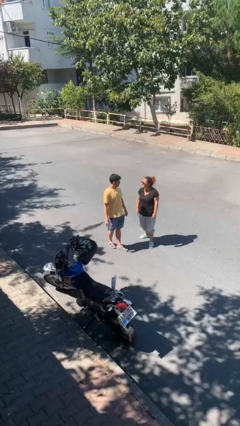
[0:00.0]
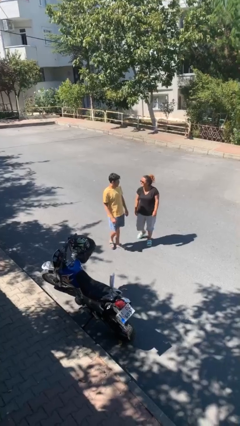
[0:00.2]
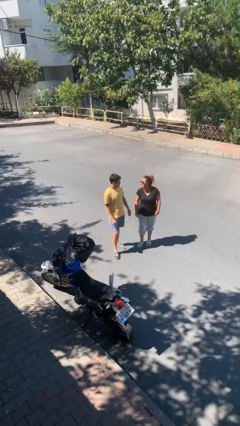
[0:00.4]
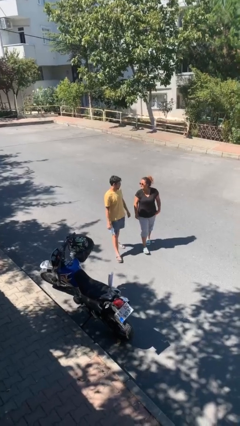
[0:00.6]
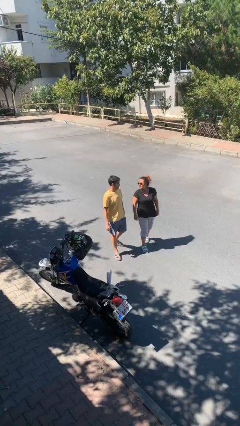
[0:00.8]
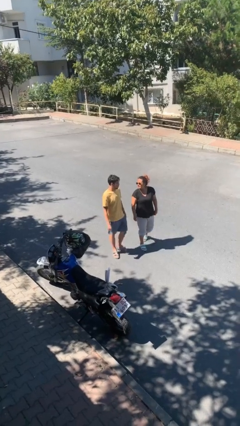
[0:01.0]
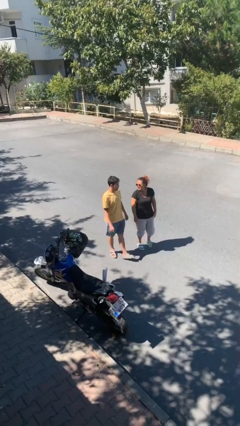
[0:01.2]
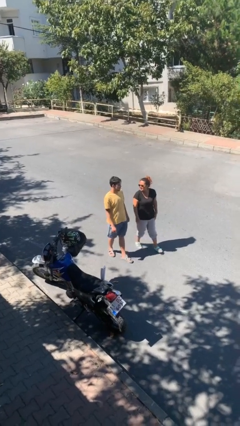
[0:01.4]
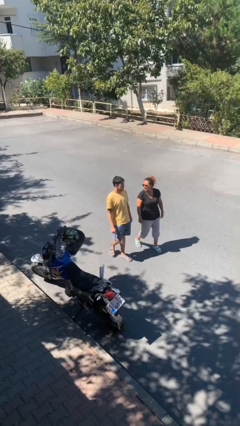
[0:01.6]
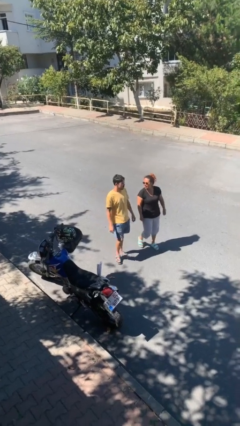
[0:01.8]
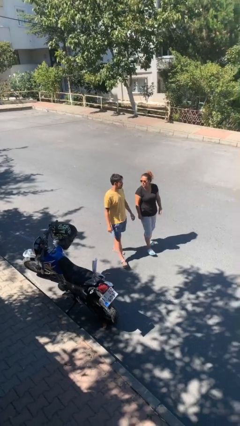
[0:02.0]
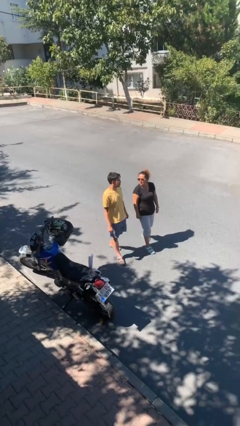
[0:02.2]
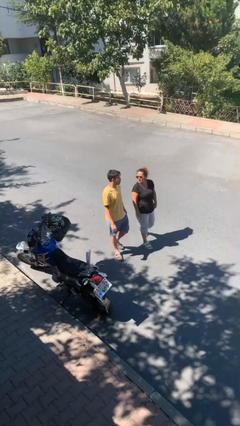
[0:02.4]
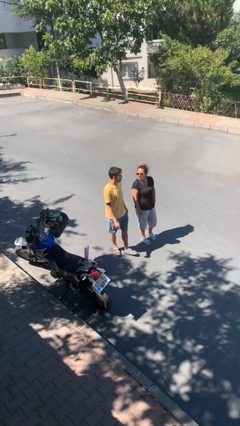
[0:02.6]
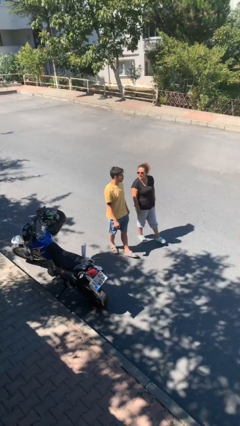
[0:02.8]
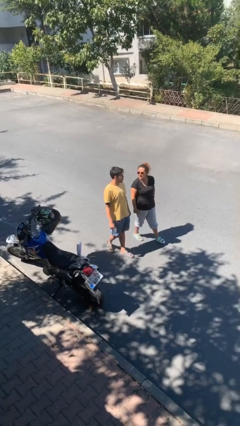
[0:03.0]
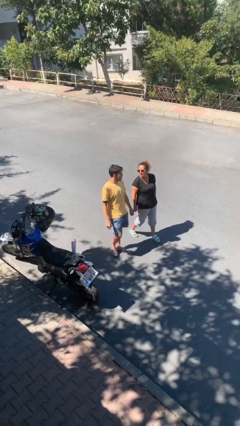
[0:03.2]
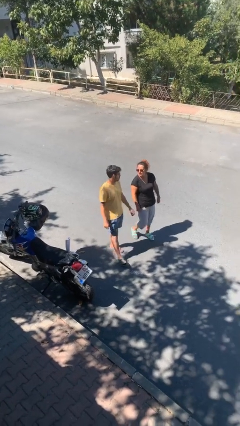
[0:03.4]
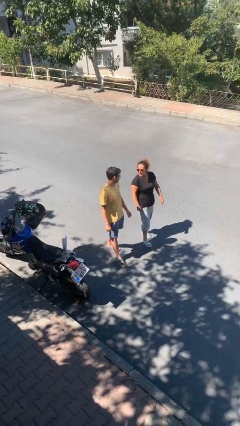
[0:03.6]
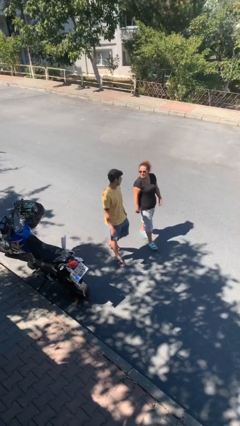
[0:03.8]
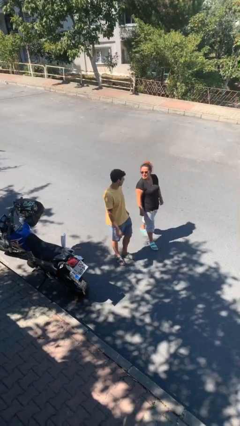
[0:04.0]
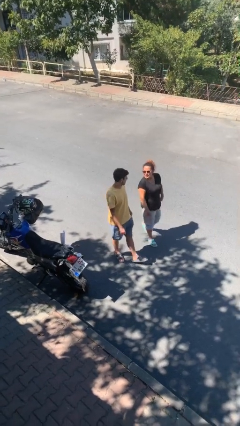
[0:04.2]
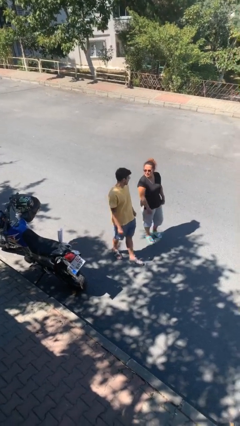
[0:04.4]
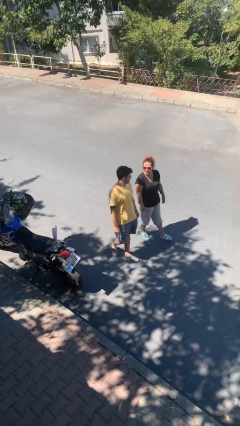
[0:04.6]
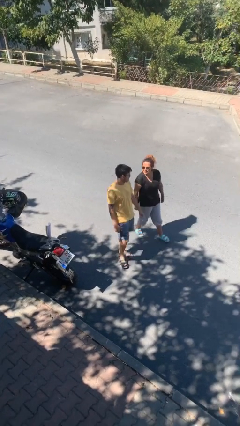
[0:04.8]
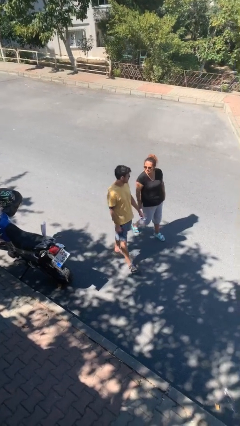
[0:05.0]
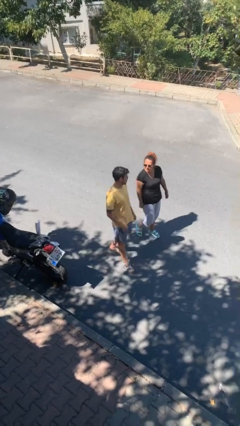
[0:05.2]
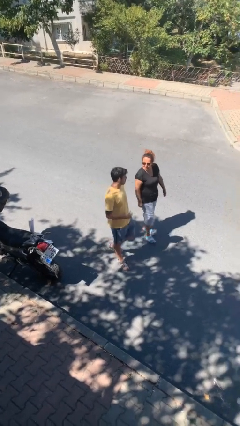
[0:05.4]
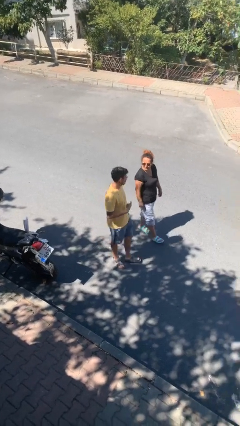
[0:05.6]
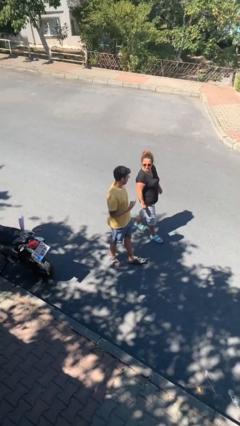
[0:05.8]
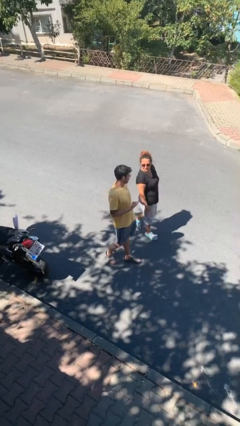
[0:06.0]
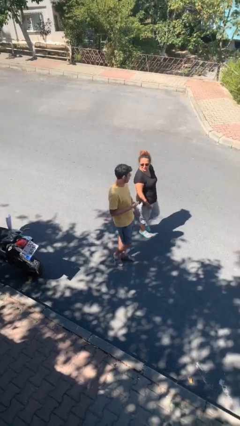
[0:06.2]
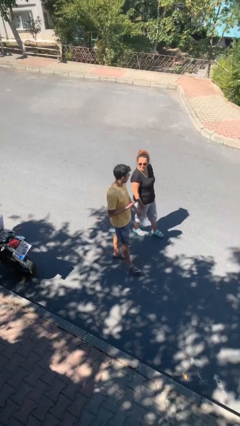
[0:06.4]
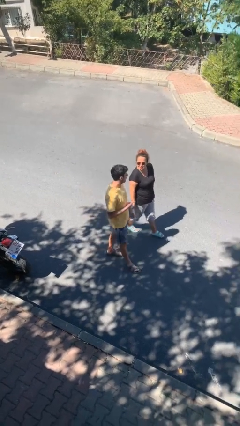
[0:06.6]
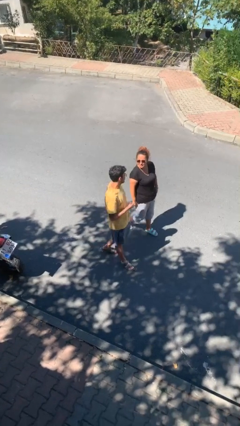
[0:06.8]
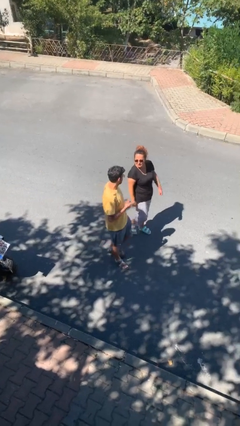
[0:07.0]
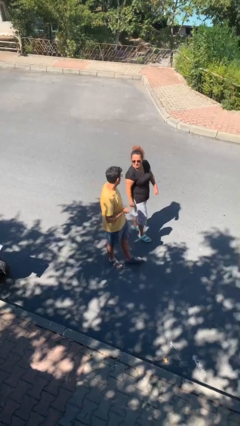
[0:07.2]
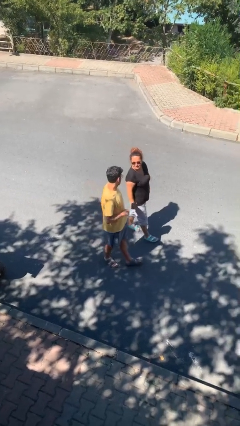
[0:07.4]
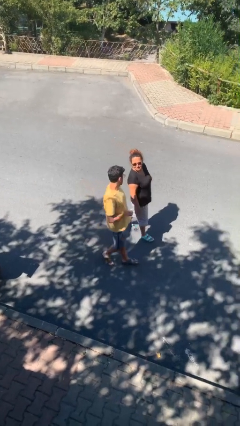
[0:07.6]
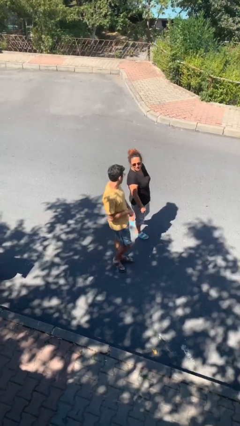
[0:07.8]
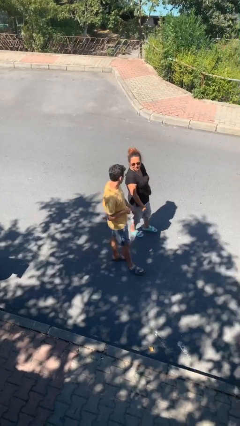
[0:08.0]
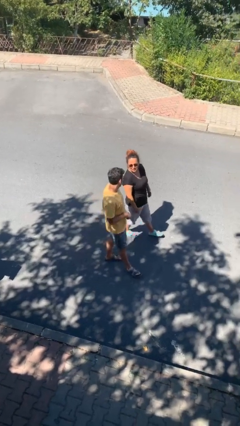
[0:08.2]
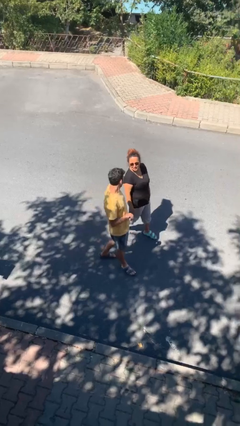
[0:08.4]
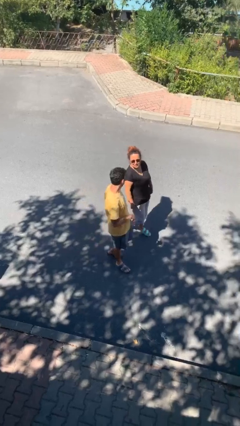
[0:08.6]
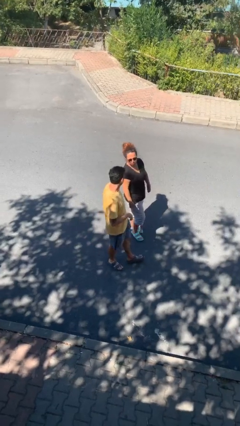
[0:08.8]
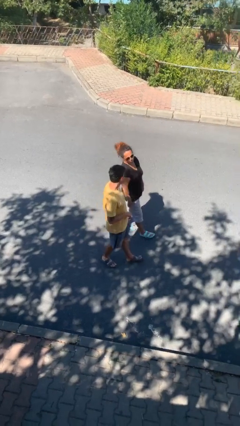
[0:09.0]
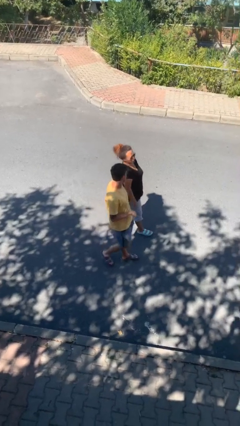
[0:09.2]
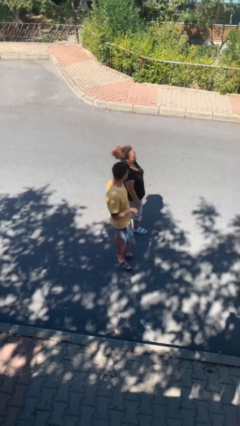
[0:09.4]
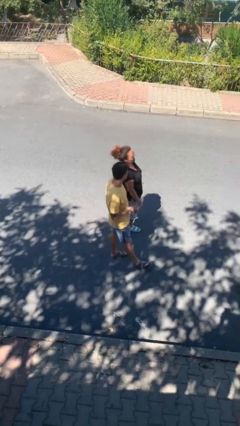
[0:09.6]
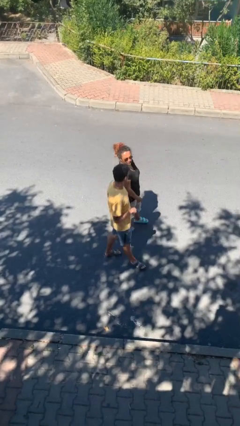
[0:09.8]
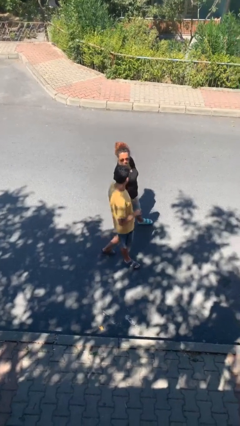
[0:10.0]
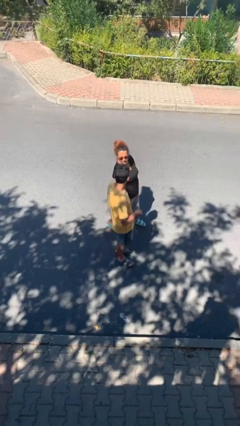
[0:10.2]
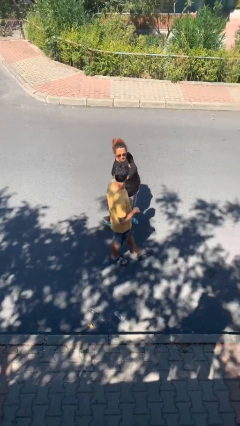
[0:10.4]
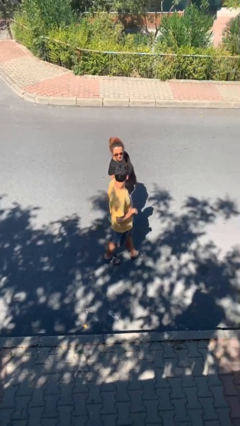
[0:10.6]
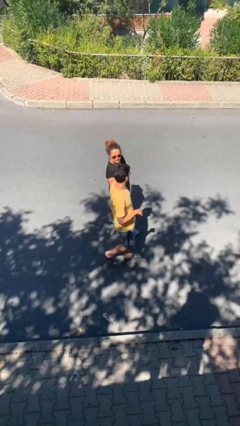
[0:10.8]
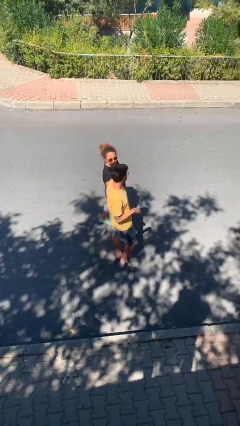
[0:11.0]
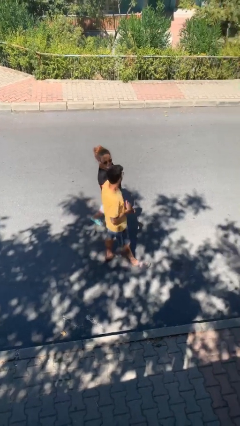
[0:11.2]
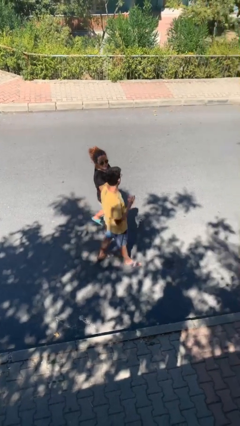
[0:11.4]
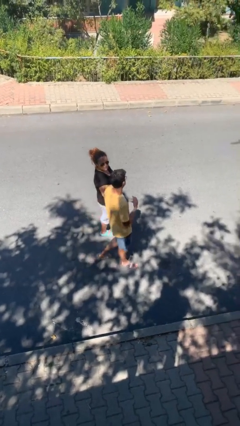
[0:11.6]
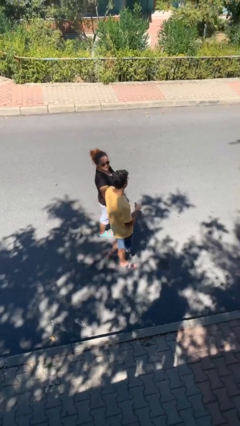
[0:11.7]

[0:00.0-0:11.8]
person talks to person

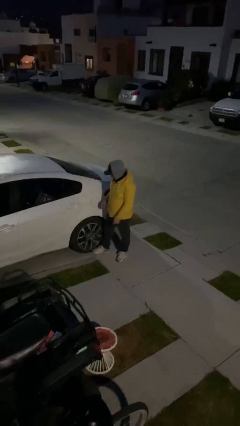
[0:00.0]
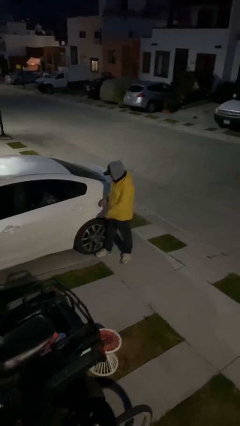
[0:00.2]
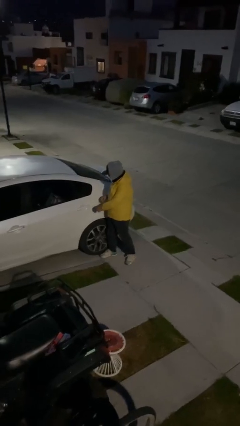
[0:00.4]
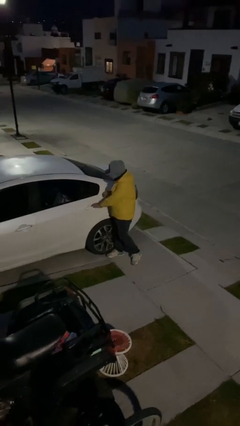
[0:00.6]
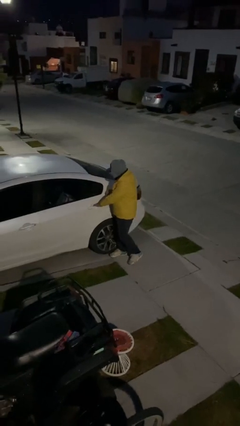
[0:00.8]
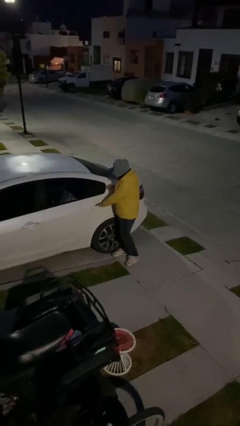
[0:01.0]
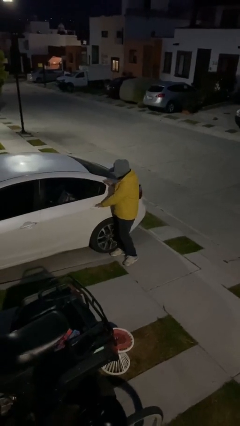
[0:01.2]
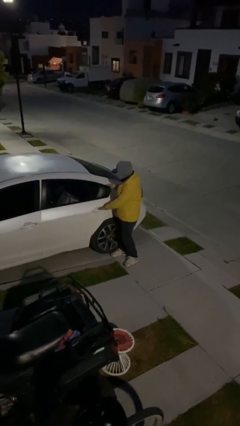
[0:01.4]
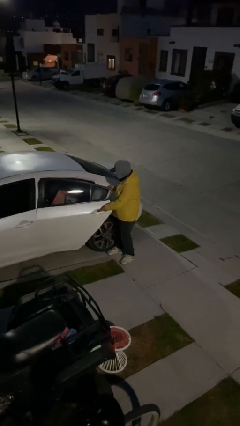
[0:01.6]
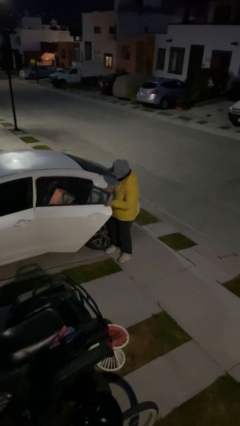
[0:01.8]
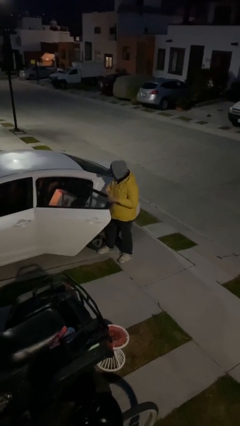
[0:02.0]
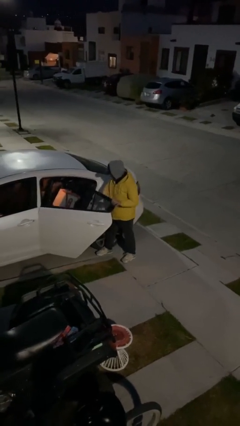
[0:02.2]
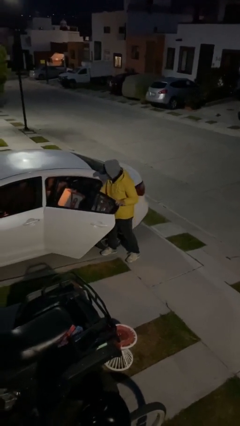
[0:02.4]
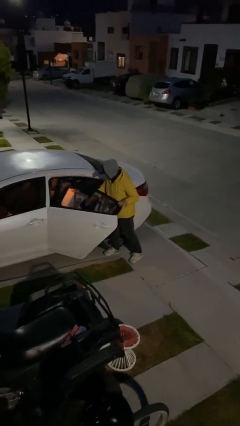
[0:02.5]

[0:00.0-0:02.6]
person opens car door

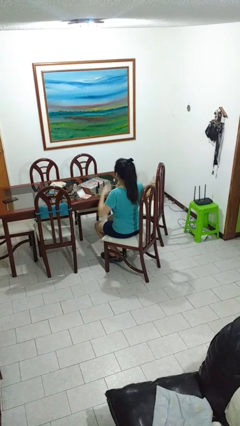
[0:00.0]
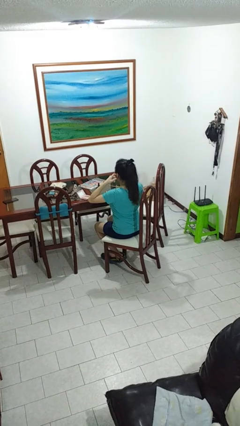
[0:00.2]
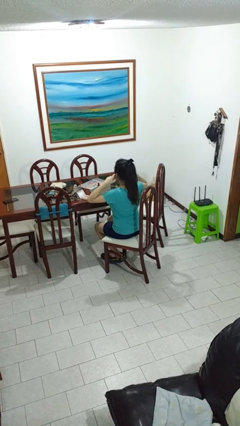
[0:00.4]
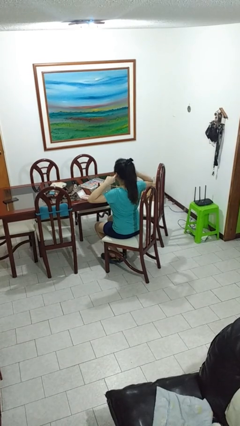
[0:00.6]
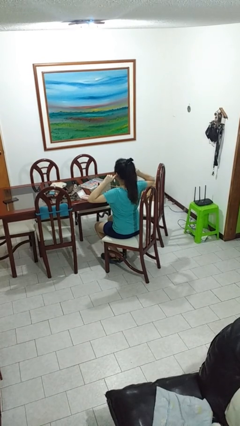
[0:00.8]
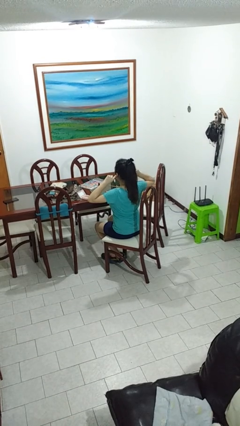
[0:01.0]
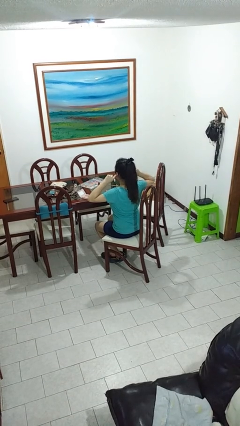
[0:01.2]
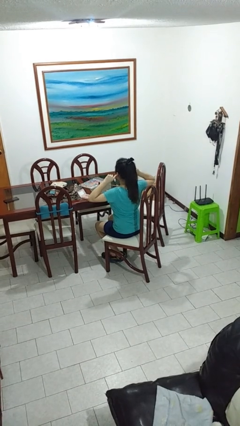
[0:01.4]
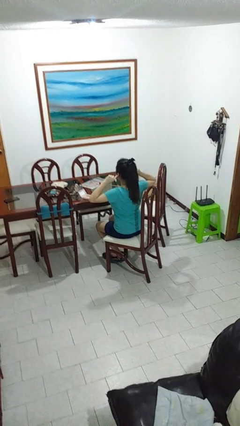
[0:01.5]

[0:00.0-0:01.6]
person puts fingers in ear

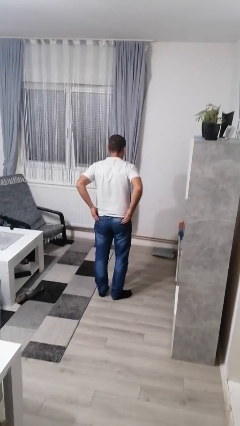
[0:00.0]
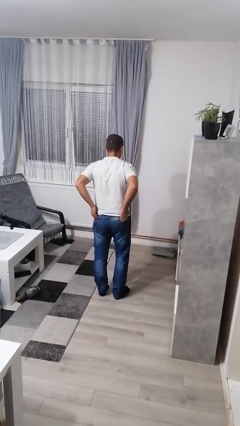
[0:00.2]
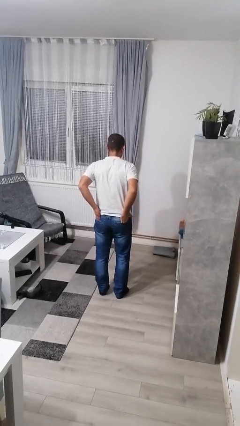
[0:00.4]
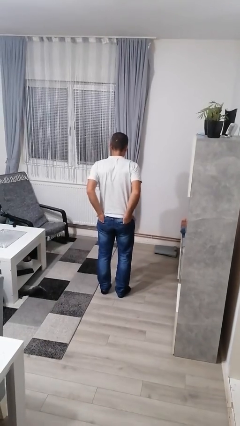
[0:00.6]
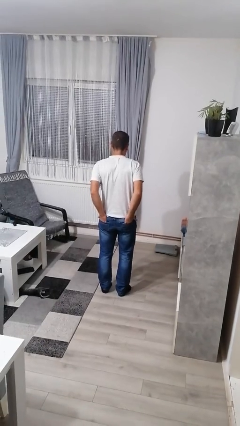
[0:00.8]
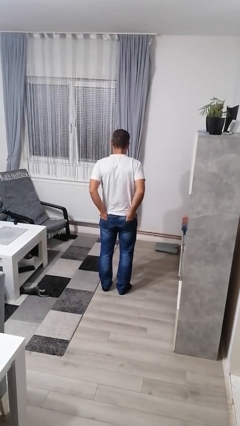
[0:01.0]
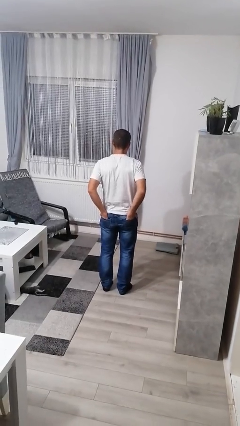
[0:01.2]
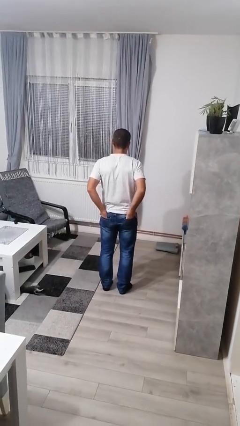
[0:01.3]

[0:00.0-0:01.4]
person puts hands in back pockets

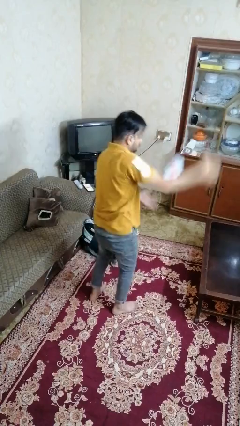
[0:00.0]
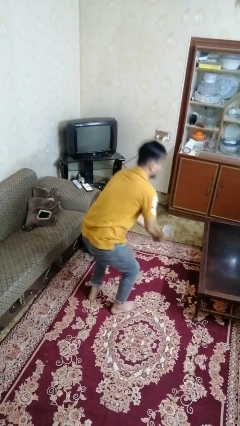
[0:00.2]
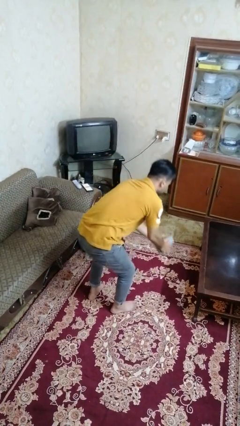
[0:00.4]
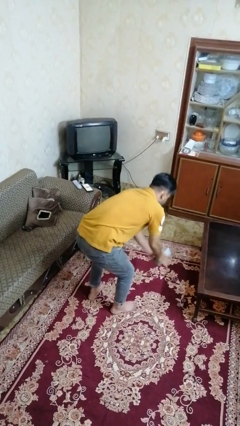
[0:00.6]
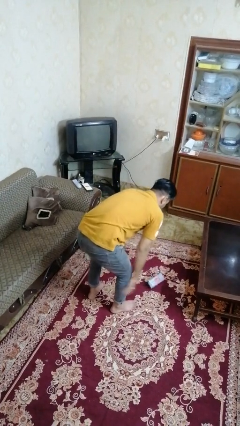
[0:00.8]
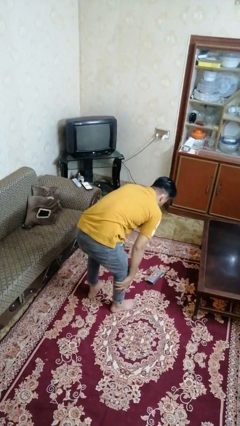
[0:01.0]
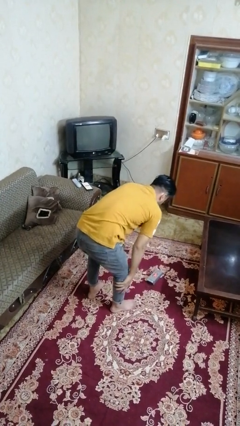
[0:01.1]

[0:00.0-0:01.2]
person catches dropped object
